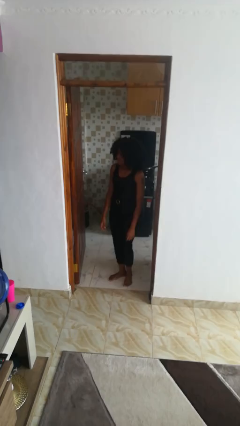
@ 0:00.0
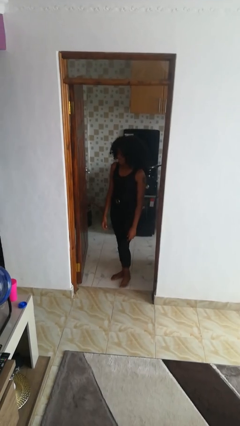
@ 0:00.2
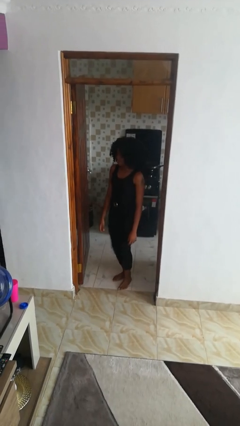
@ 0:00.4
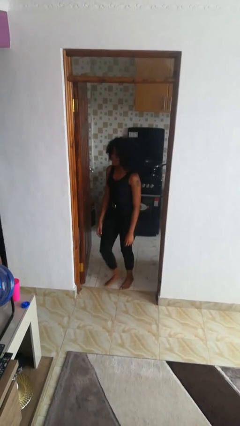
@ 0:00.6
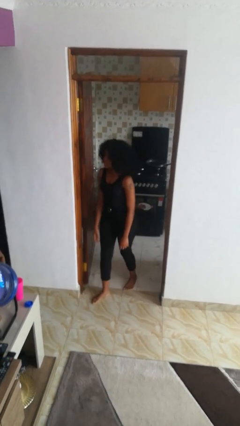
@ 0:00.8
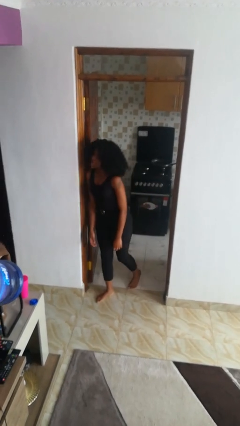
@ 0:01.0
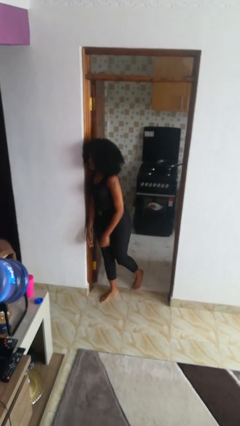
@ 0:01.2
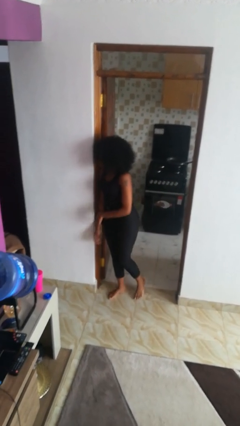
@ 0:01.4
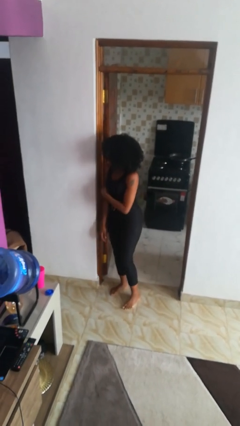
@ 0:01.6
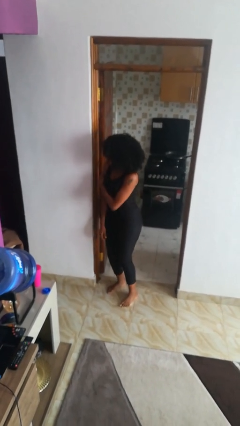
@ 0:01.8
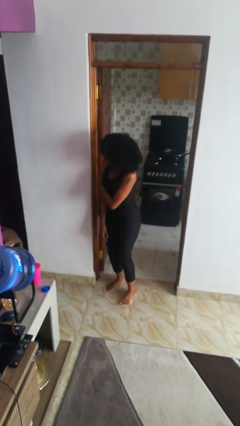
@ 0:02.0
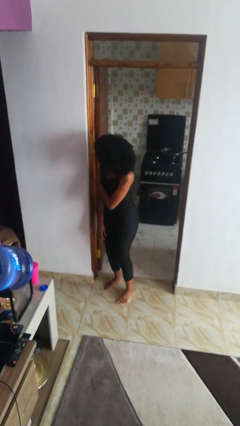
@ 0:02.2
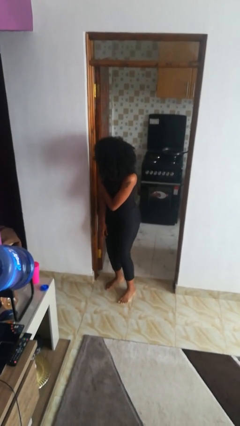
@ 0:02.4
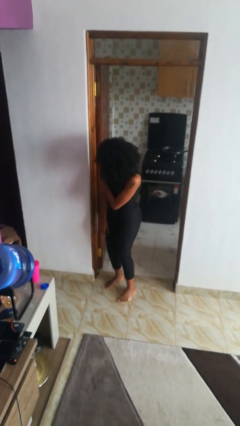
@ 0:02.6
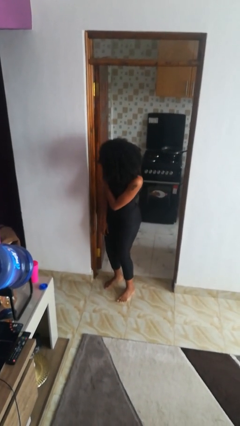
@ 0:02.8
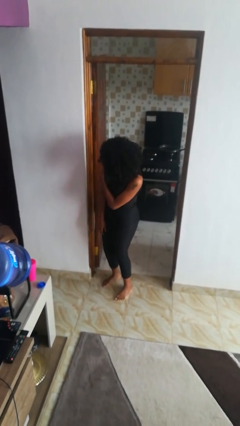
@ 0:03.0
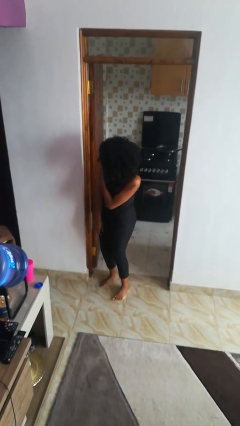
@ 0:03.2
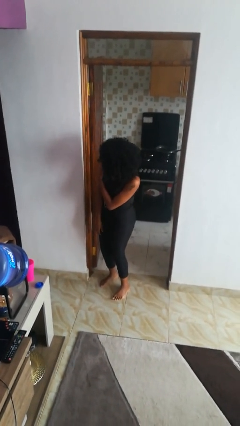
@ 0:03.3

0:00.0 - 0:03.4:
person bumps into wall

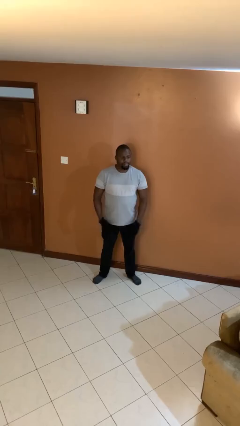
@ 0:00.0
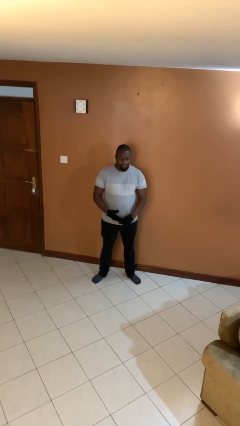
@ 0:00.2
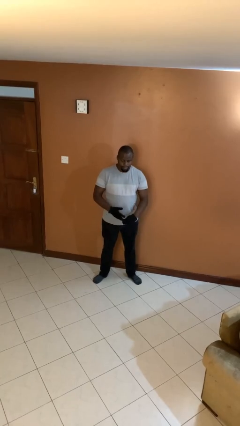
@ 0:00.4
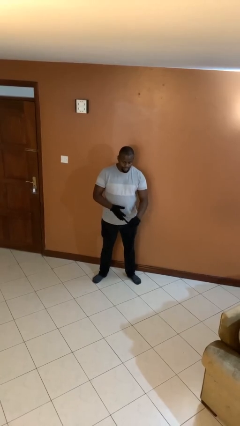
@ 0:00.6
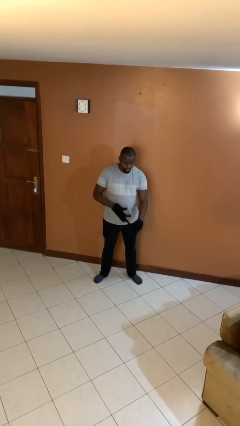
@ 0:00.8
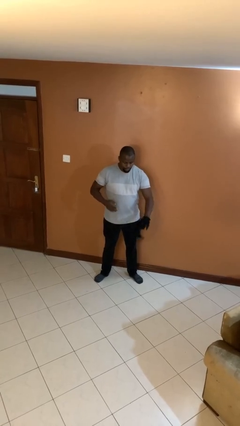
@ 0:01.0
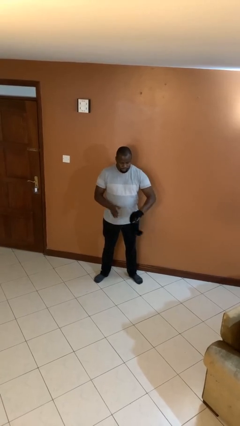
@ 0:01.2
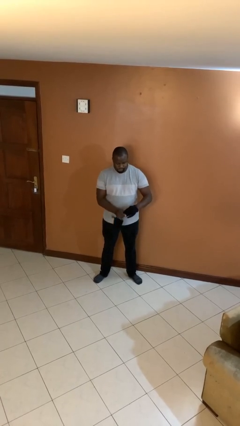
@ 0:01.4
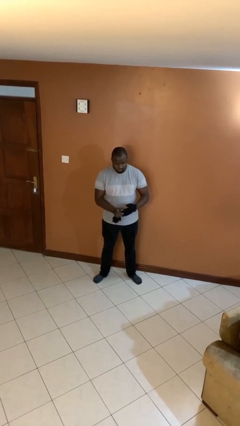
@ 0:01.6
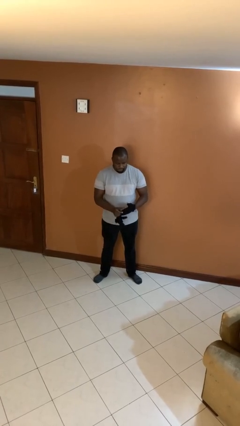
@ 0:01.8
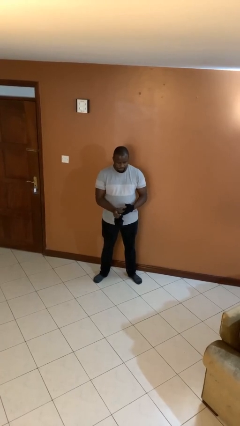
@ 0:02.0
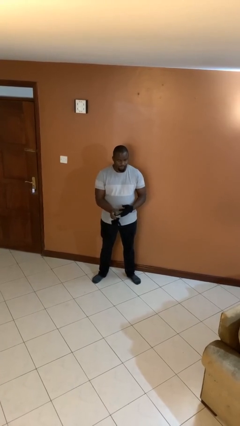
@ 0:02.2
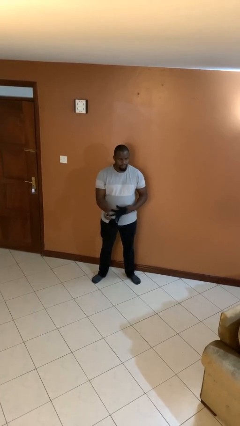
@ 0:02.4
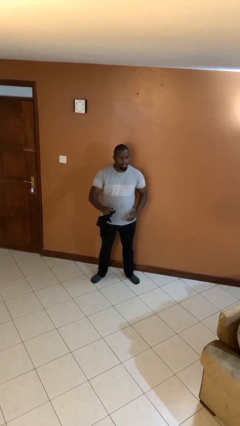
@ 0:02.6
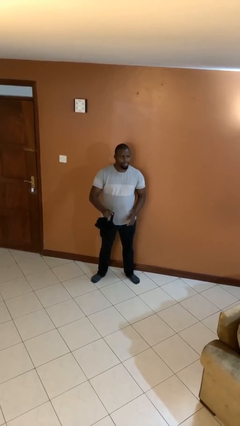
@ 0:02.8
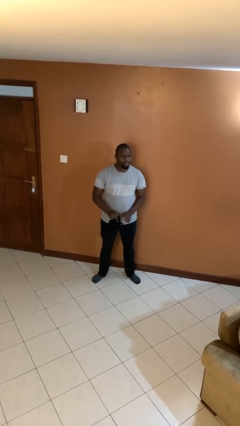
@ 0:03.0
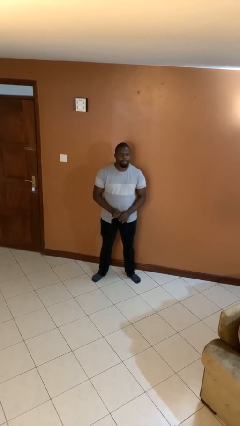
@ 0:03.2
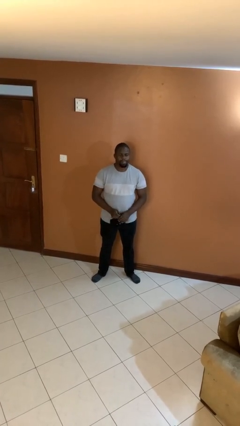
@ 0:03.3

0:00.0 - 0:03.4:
person takes off gloves

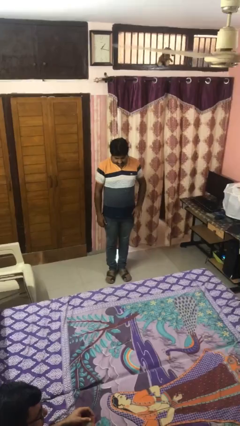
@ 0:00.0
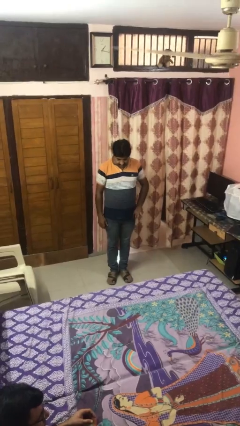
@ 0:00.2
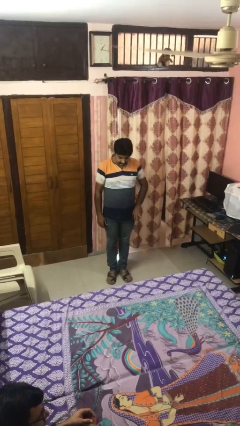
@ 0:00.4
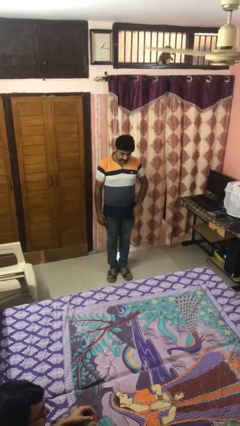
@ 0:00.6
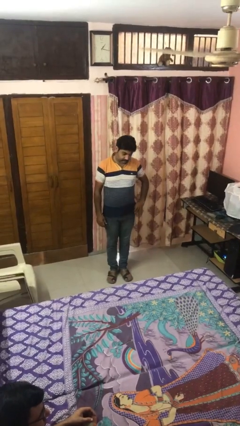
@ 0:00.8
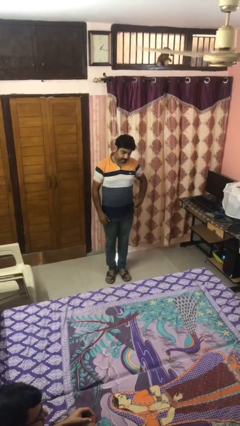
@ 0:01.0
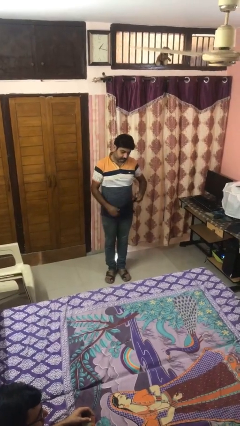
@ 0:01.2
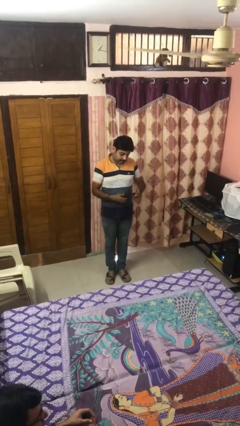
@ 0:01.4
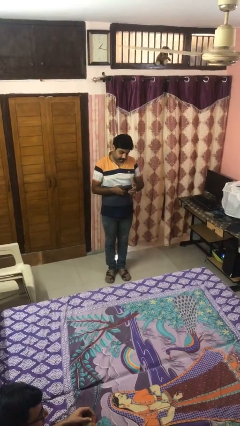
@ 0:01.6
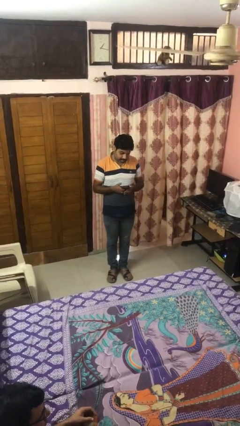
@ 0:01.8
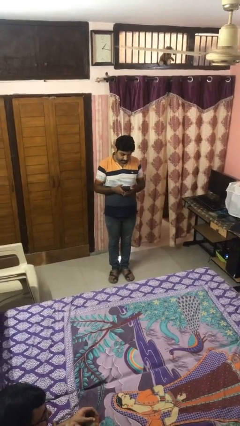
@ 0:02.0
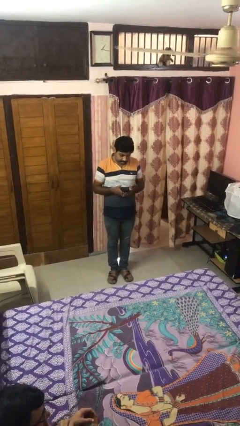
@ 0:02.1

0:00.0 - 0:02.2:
person takes phone from pocket

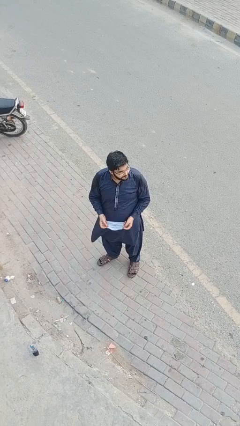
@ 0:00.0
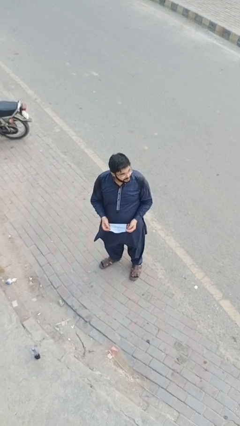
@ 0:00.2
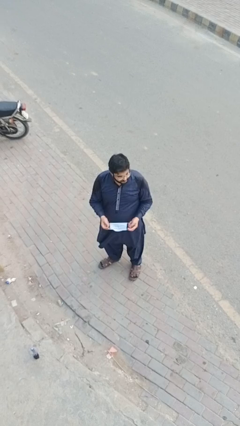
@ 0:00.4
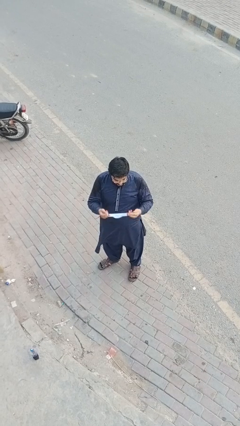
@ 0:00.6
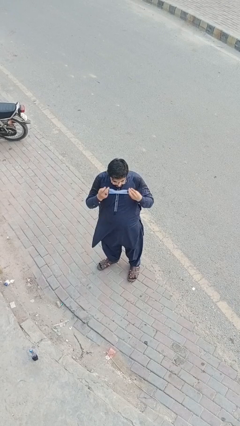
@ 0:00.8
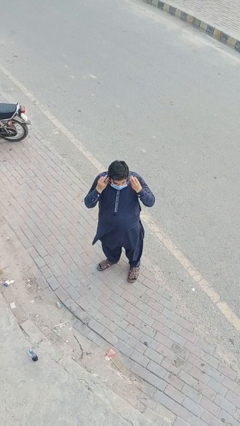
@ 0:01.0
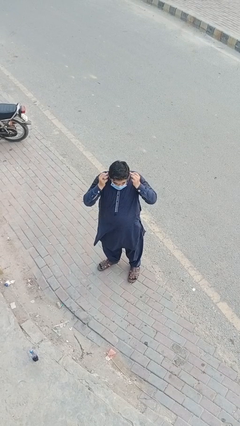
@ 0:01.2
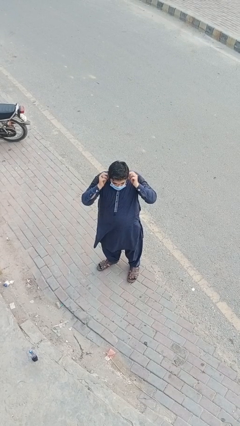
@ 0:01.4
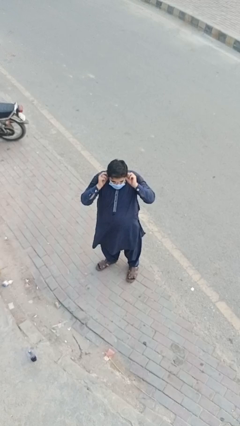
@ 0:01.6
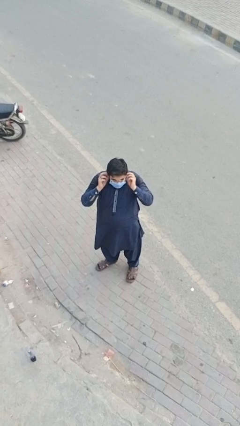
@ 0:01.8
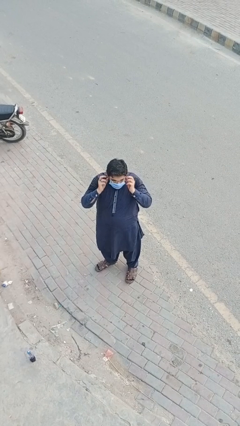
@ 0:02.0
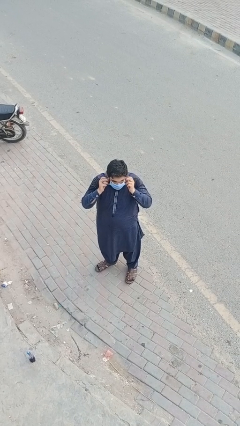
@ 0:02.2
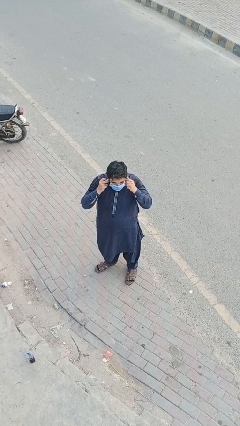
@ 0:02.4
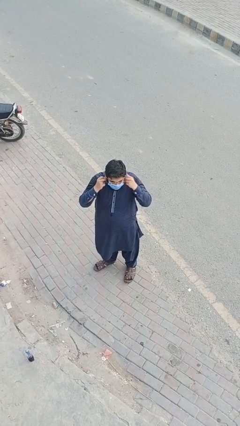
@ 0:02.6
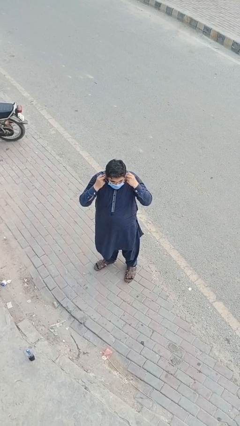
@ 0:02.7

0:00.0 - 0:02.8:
person puts on facemask

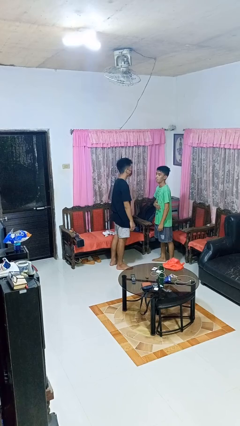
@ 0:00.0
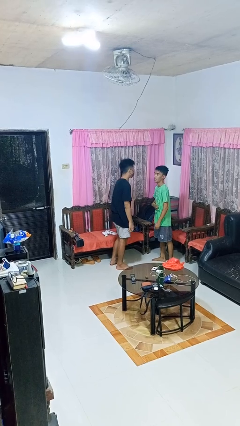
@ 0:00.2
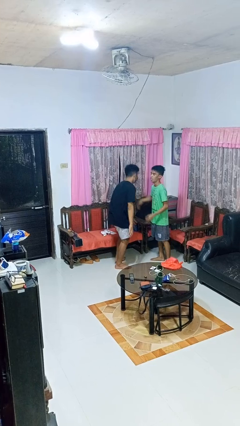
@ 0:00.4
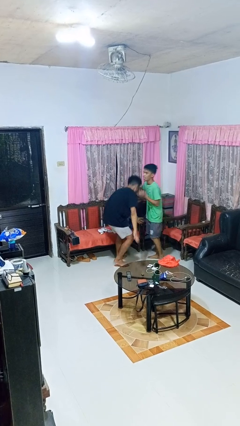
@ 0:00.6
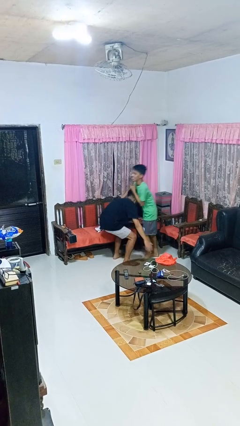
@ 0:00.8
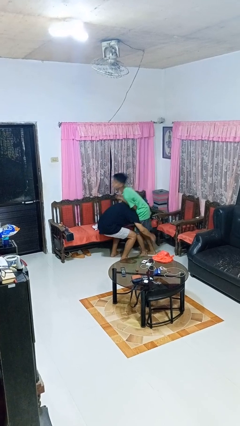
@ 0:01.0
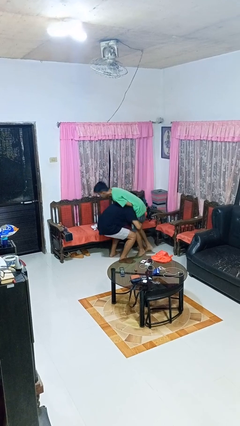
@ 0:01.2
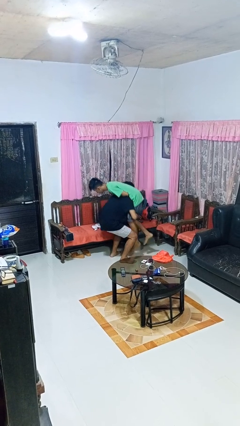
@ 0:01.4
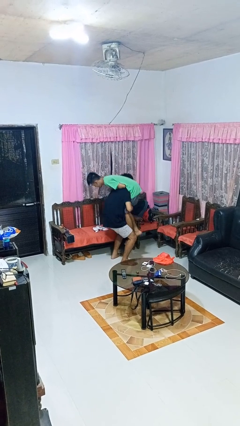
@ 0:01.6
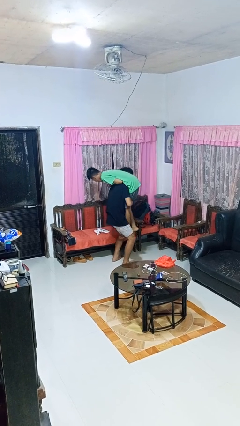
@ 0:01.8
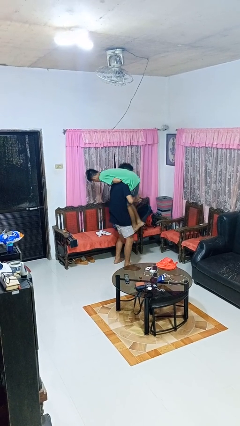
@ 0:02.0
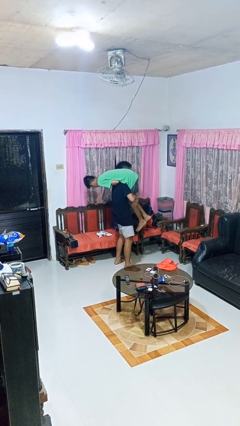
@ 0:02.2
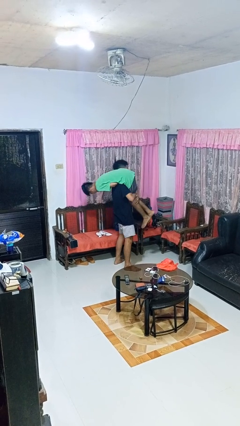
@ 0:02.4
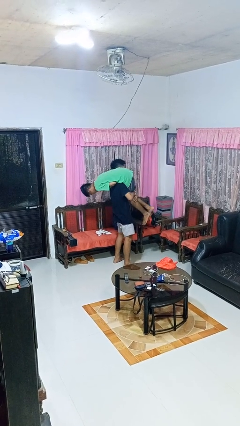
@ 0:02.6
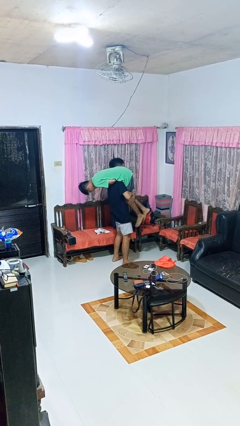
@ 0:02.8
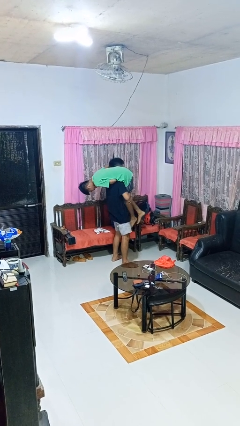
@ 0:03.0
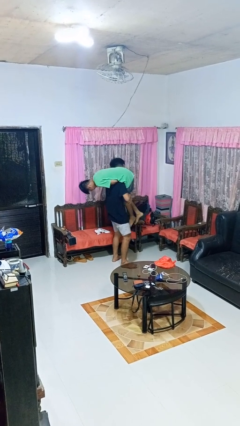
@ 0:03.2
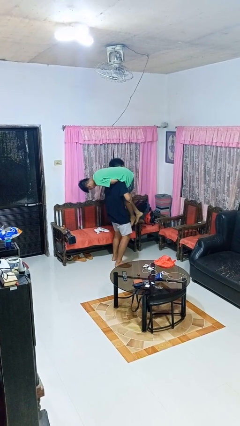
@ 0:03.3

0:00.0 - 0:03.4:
person carries person over shoulder

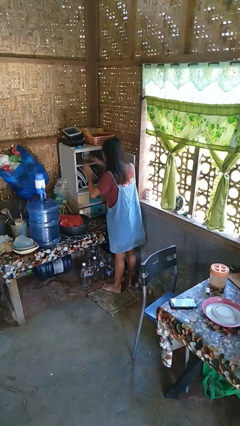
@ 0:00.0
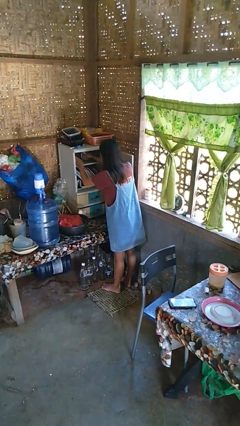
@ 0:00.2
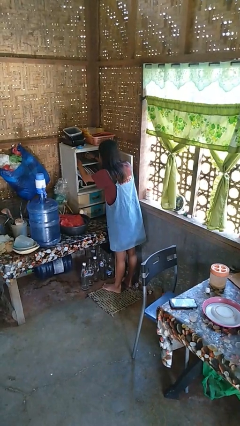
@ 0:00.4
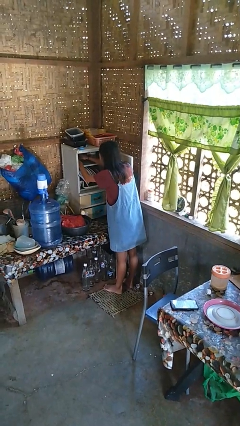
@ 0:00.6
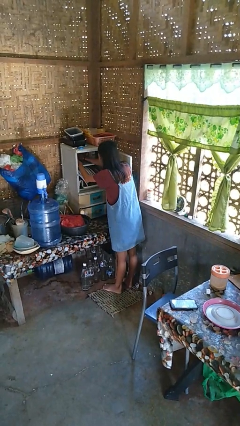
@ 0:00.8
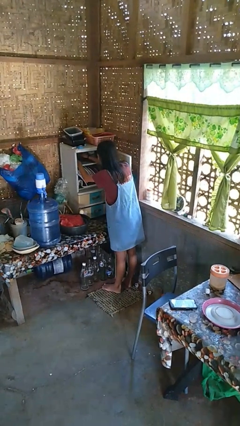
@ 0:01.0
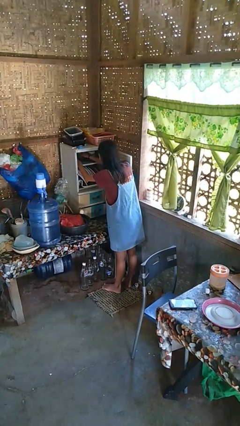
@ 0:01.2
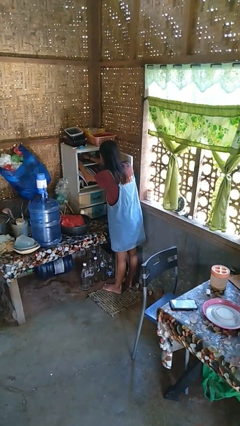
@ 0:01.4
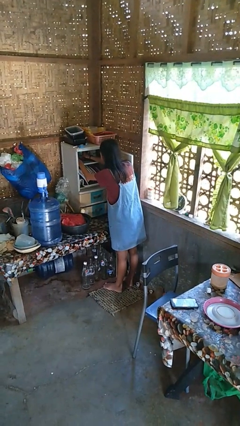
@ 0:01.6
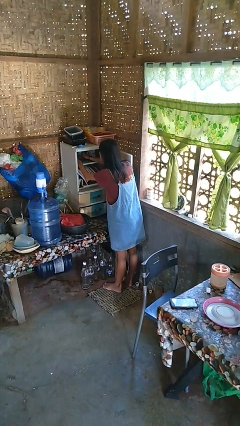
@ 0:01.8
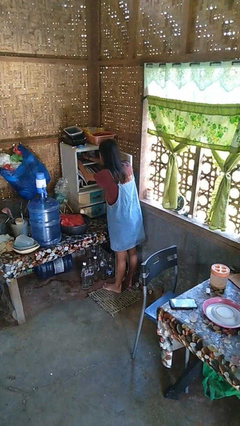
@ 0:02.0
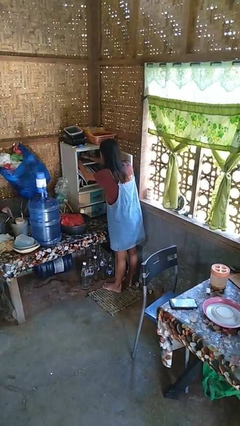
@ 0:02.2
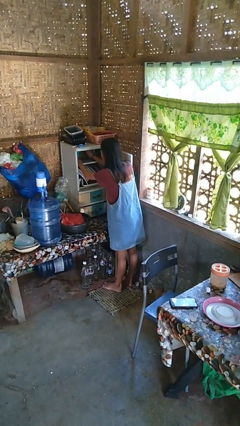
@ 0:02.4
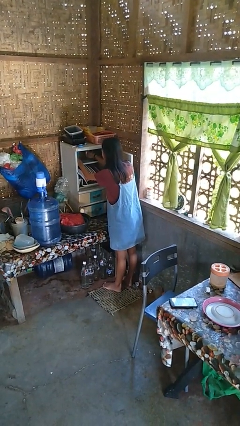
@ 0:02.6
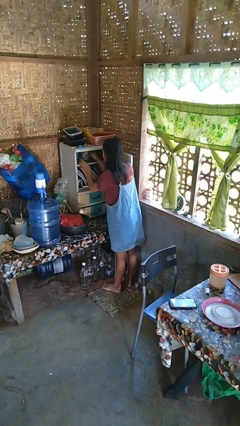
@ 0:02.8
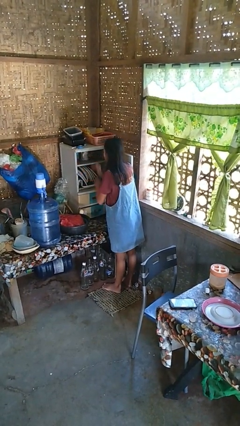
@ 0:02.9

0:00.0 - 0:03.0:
person searches in cabinet
